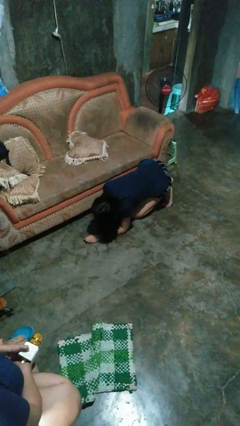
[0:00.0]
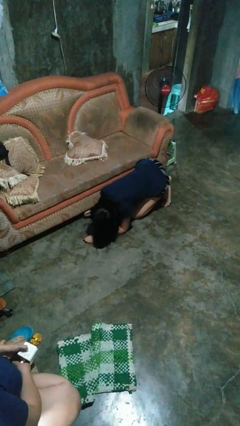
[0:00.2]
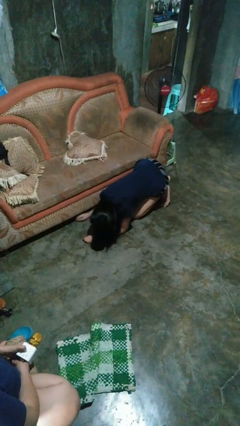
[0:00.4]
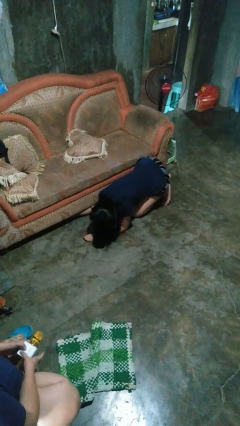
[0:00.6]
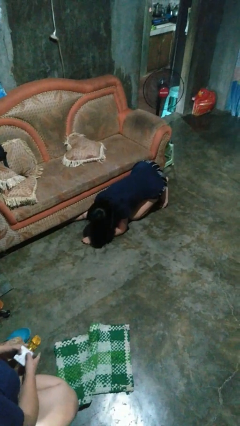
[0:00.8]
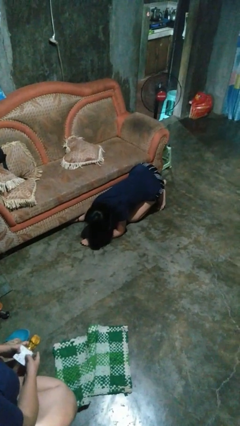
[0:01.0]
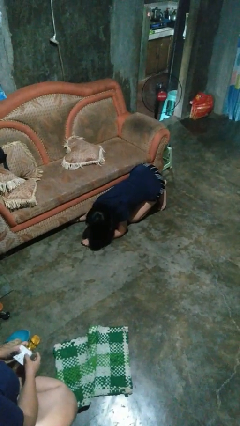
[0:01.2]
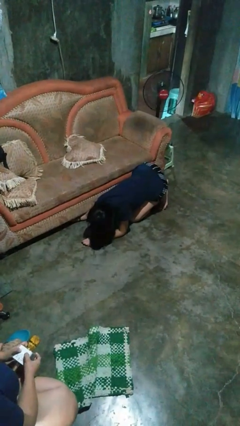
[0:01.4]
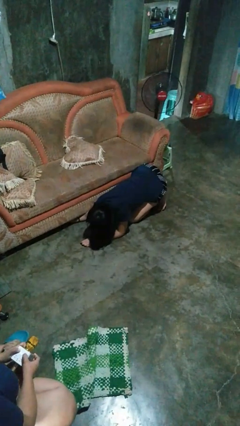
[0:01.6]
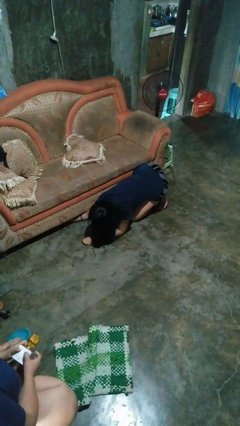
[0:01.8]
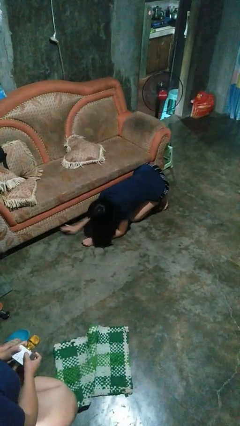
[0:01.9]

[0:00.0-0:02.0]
person searches in couch

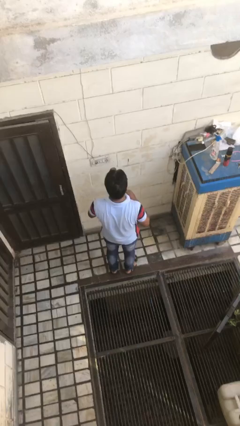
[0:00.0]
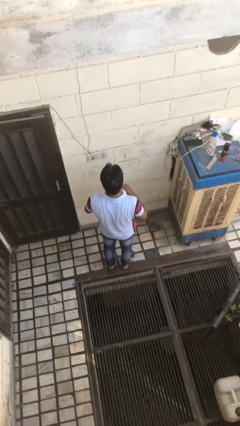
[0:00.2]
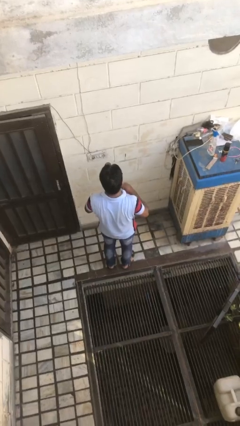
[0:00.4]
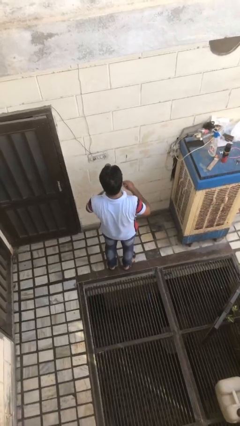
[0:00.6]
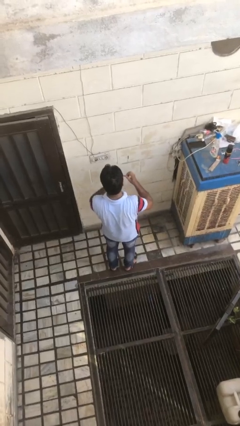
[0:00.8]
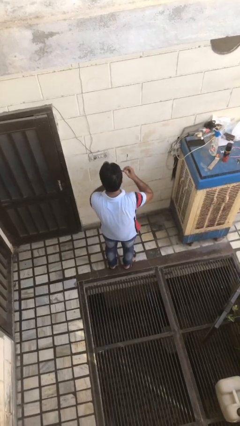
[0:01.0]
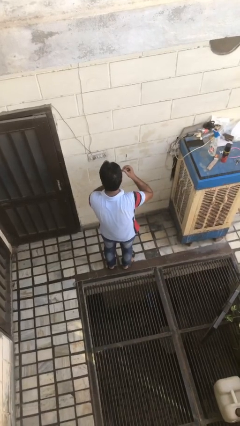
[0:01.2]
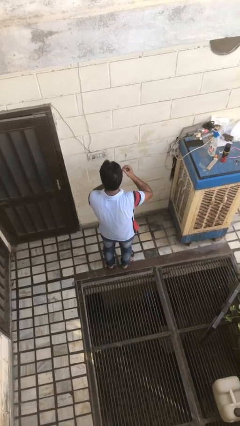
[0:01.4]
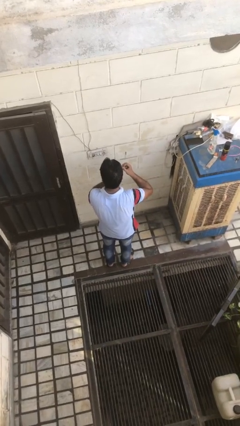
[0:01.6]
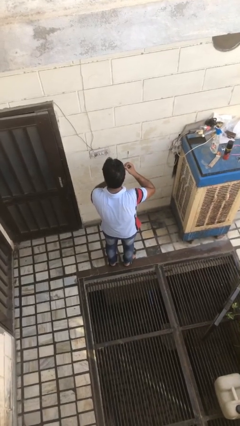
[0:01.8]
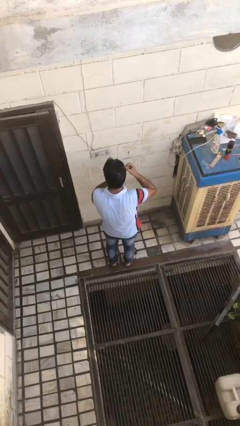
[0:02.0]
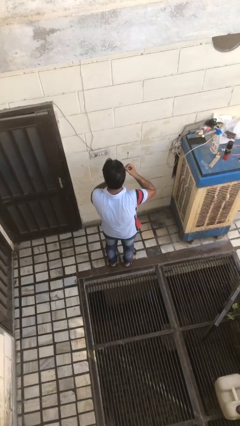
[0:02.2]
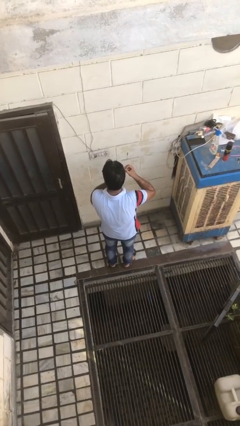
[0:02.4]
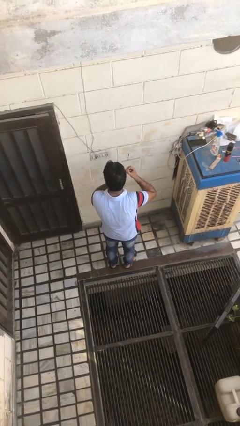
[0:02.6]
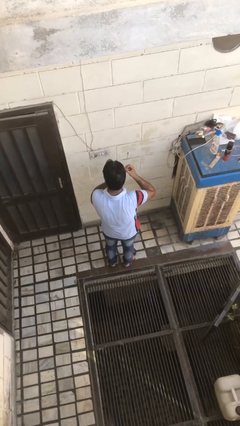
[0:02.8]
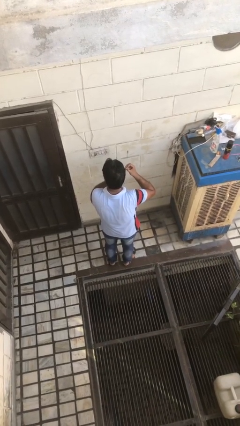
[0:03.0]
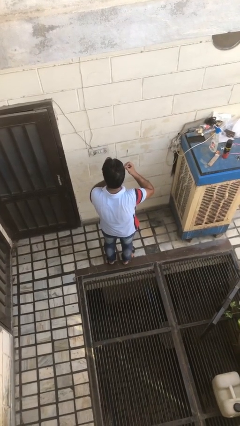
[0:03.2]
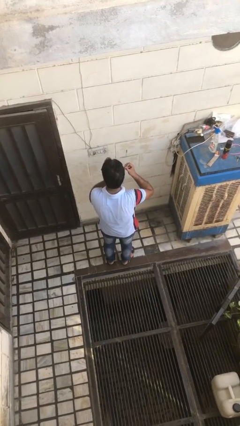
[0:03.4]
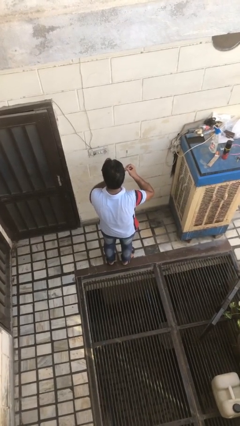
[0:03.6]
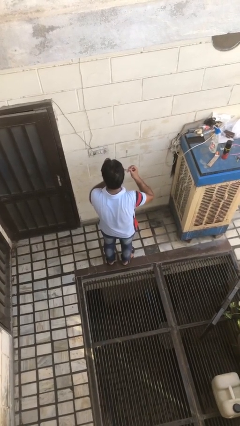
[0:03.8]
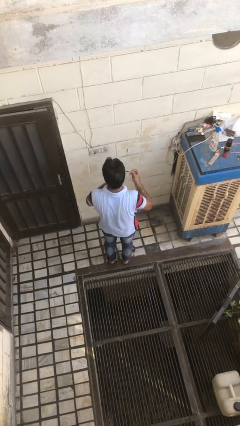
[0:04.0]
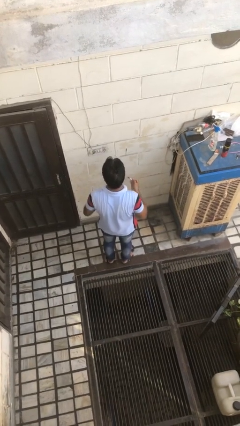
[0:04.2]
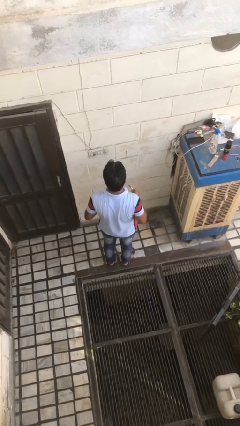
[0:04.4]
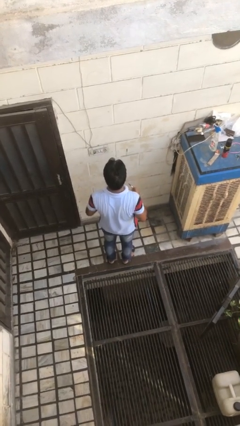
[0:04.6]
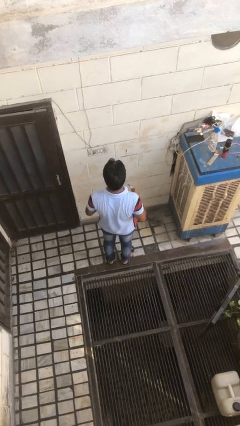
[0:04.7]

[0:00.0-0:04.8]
person applies eye makeup

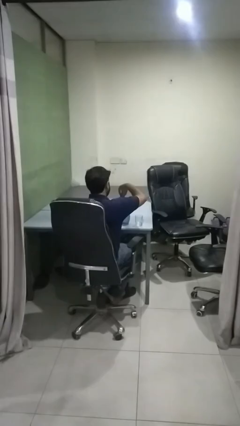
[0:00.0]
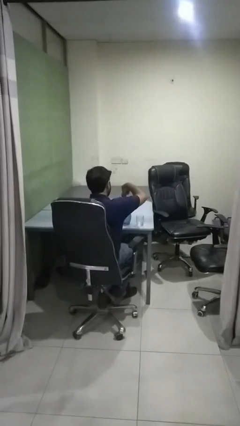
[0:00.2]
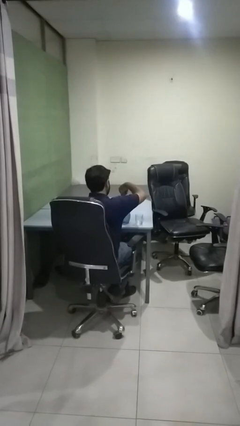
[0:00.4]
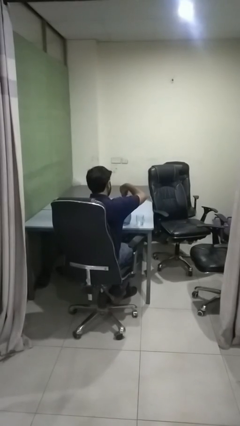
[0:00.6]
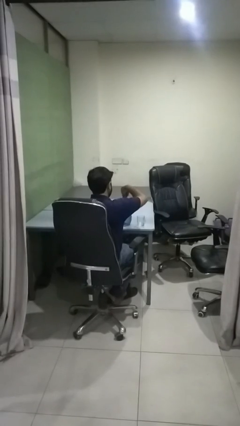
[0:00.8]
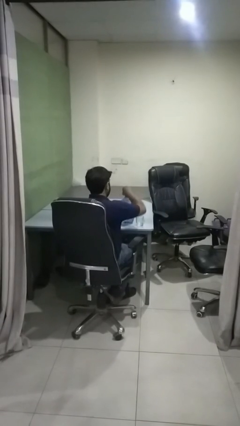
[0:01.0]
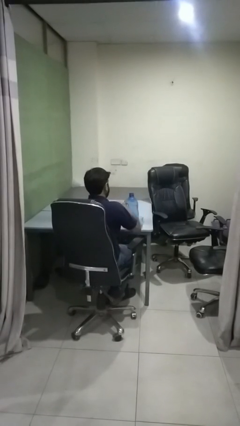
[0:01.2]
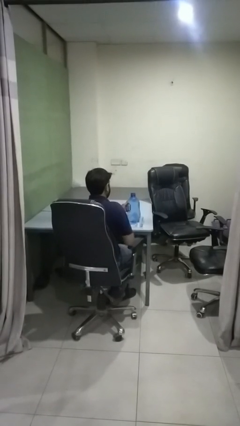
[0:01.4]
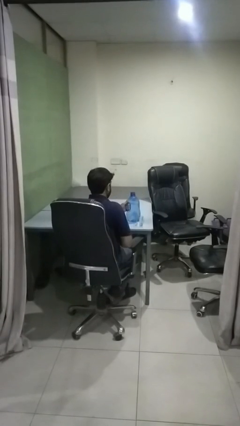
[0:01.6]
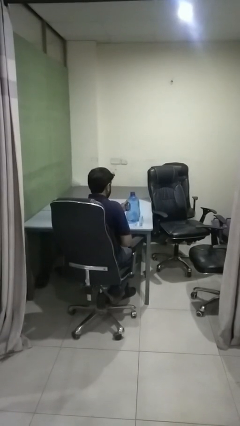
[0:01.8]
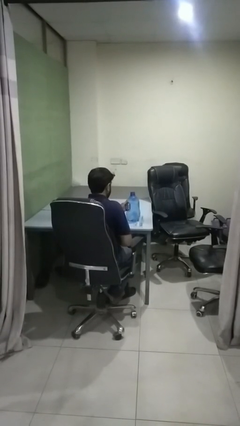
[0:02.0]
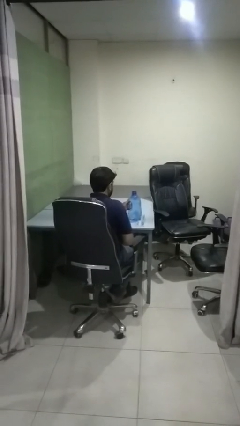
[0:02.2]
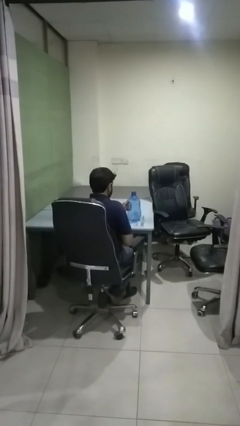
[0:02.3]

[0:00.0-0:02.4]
person screws lid to bottle

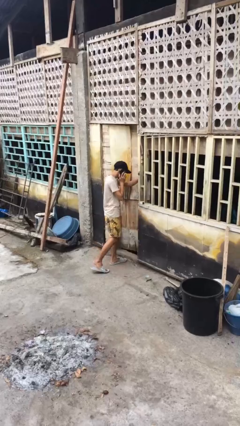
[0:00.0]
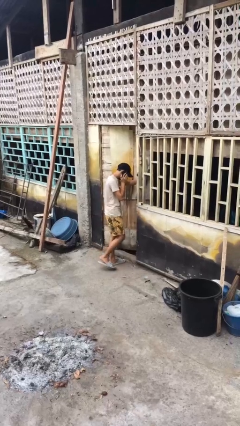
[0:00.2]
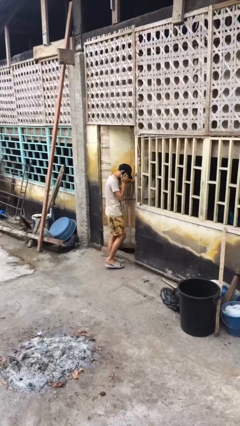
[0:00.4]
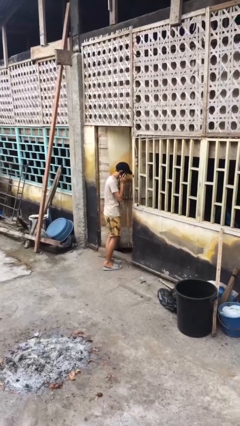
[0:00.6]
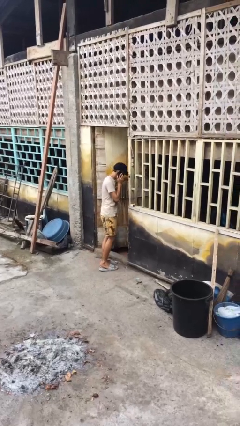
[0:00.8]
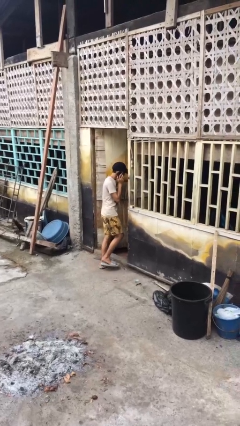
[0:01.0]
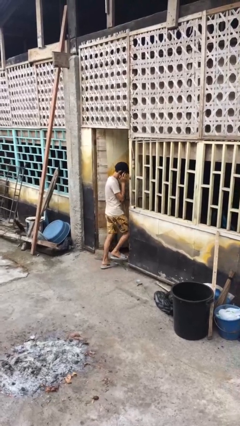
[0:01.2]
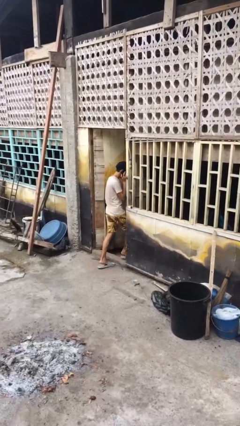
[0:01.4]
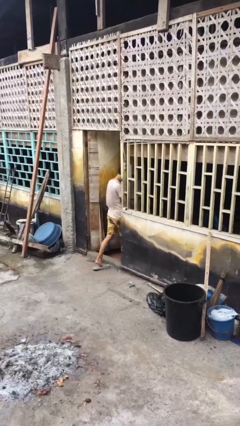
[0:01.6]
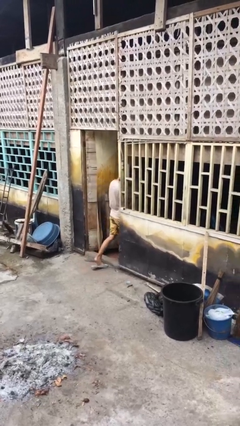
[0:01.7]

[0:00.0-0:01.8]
person opens facility door

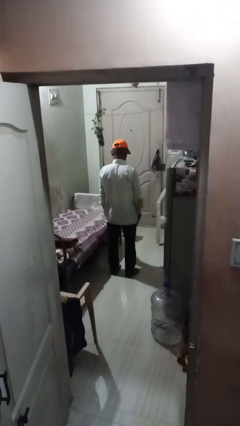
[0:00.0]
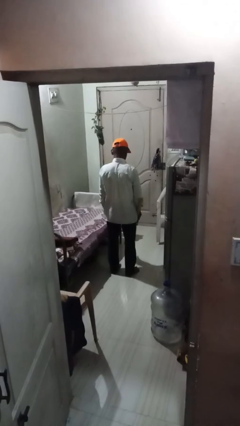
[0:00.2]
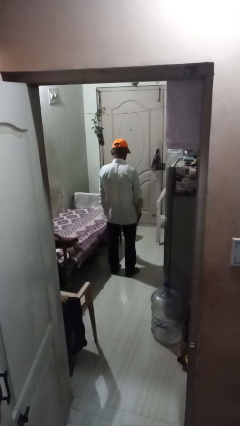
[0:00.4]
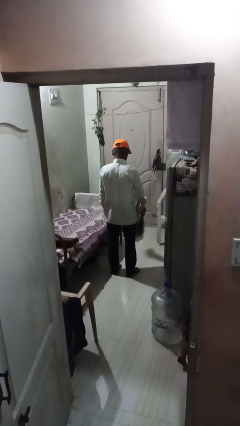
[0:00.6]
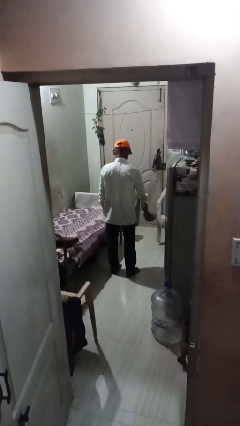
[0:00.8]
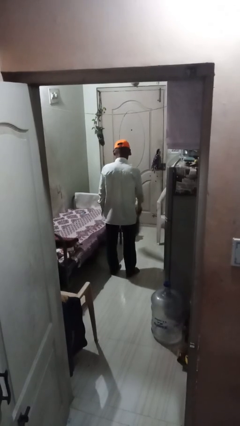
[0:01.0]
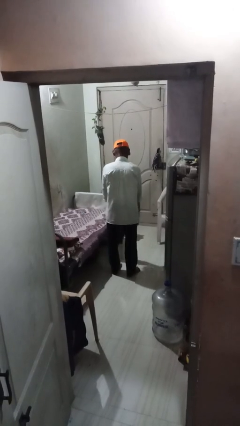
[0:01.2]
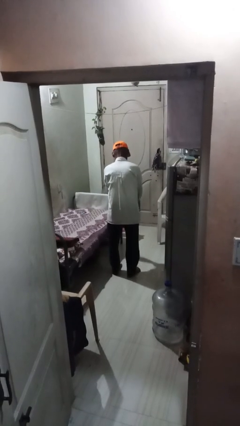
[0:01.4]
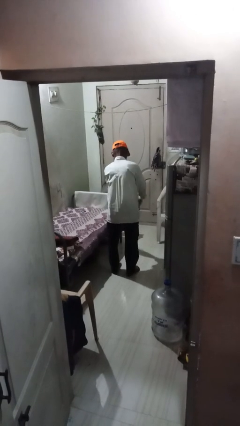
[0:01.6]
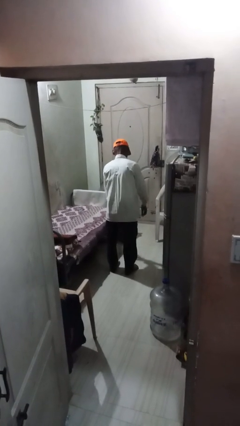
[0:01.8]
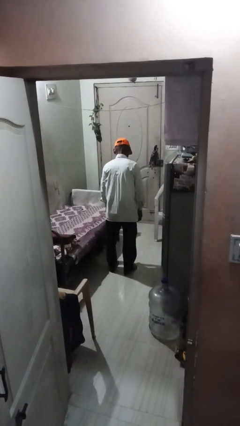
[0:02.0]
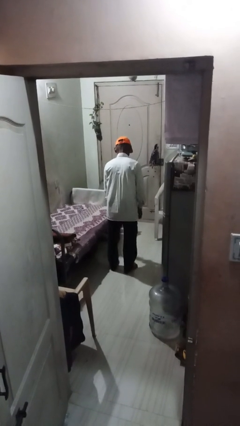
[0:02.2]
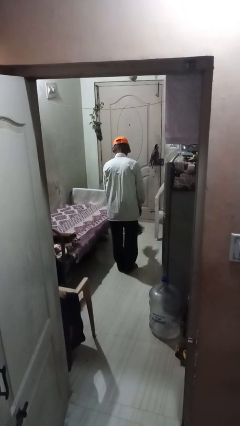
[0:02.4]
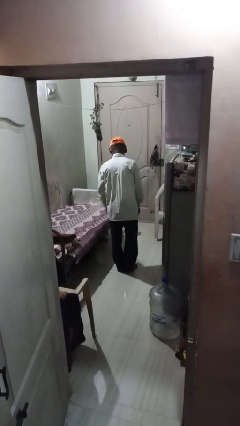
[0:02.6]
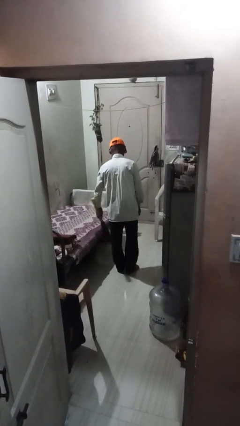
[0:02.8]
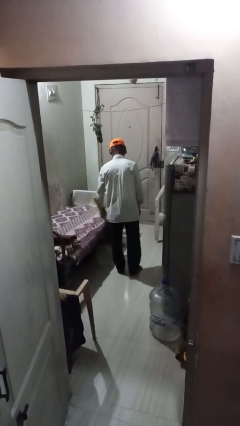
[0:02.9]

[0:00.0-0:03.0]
person mops

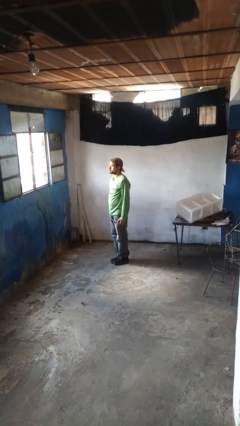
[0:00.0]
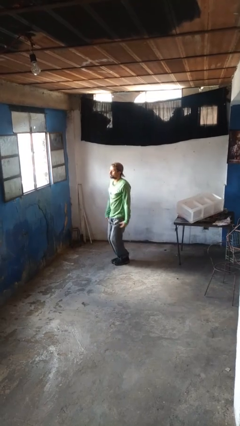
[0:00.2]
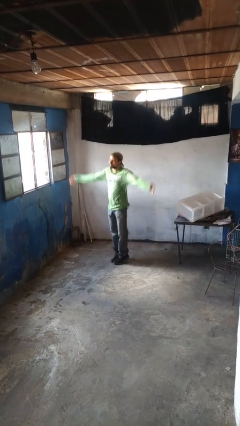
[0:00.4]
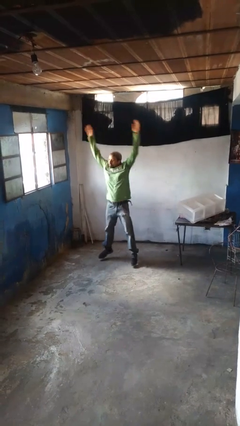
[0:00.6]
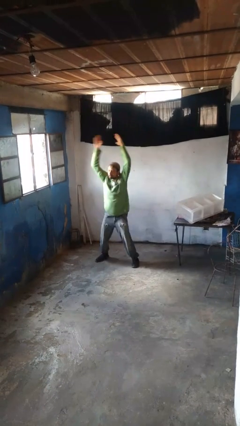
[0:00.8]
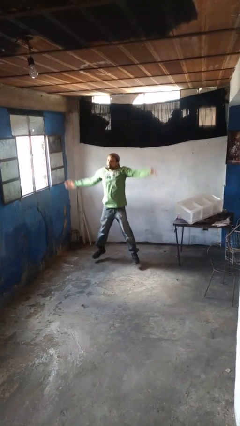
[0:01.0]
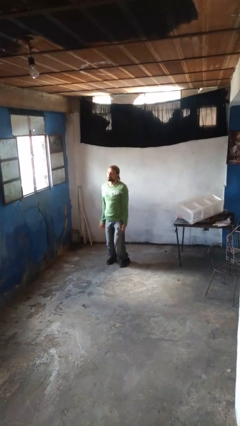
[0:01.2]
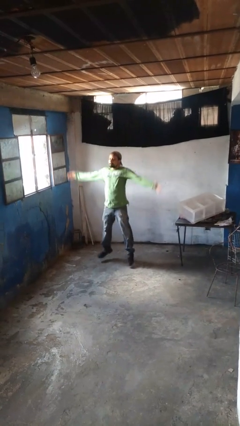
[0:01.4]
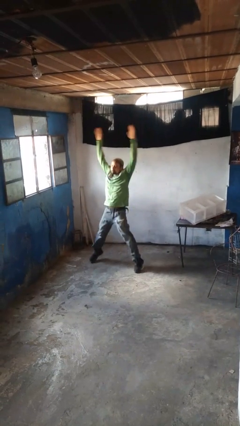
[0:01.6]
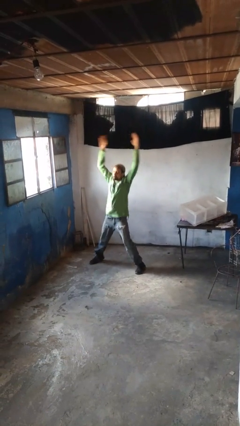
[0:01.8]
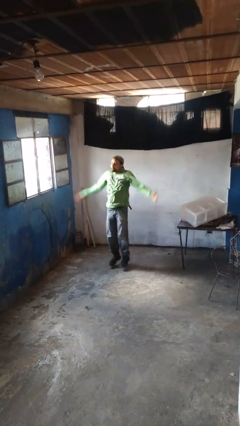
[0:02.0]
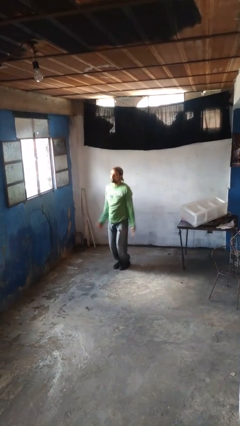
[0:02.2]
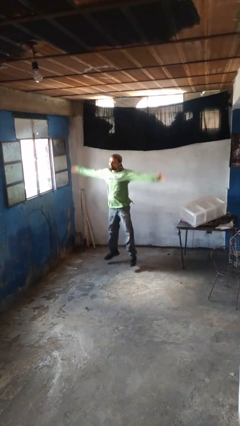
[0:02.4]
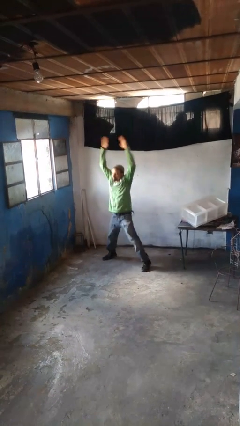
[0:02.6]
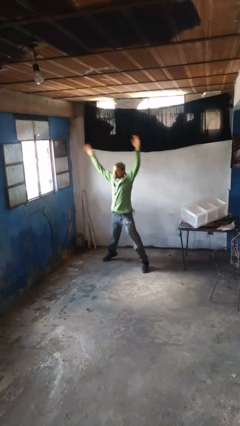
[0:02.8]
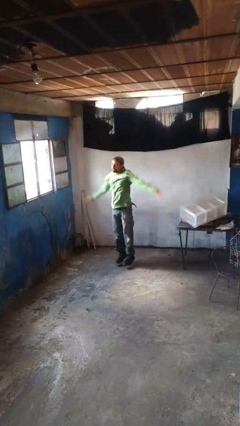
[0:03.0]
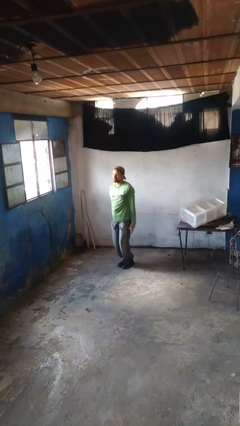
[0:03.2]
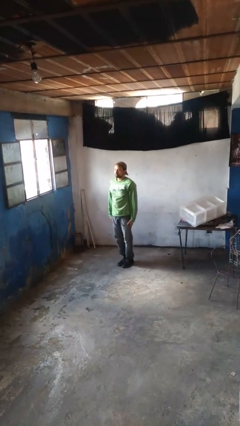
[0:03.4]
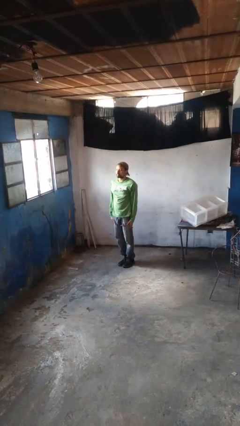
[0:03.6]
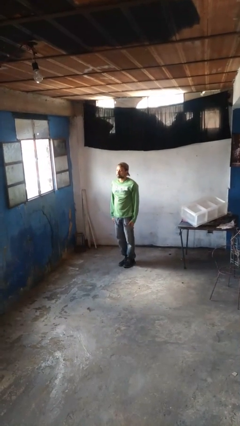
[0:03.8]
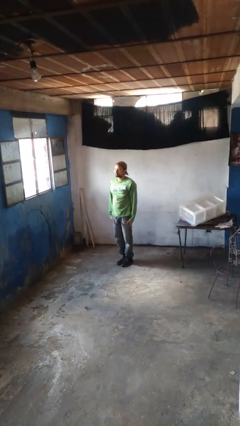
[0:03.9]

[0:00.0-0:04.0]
person exercises with jumping jacks
